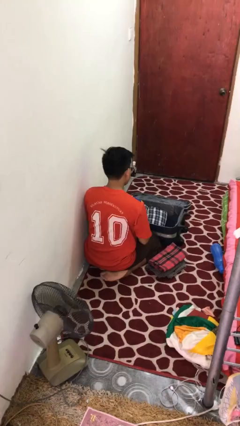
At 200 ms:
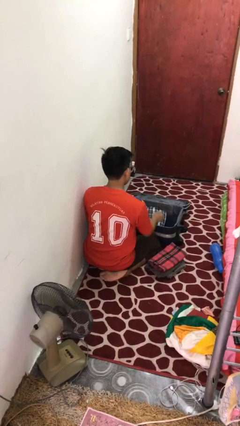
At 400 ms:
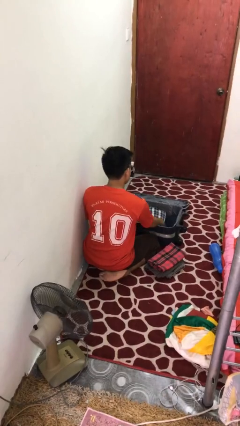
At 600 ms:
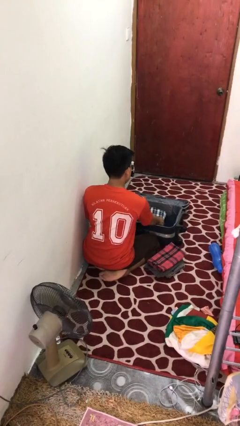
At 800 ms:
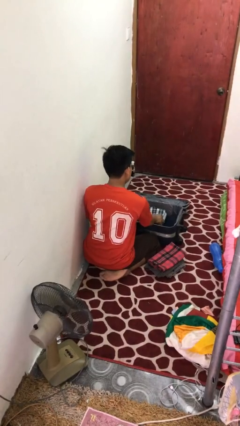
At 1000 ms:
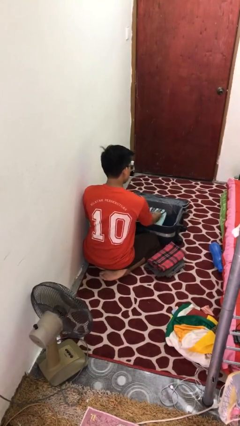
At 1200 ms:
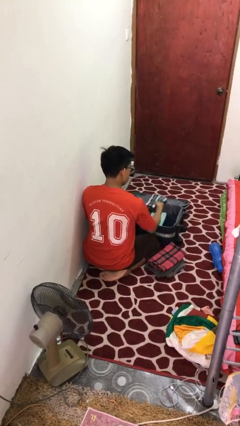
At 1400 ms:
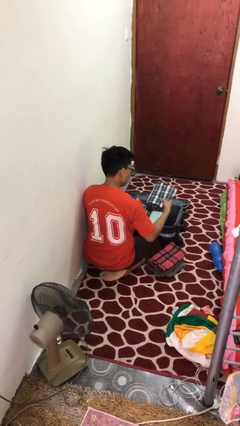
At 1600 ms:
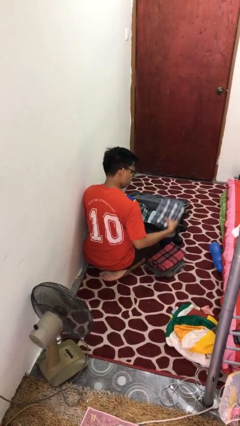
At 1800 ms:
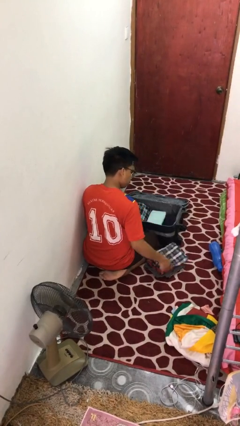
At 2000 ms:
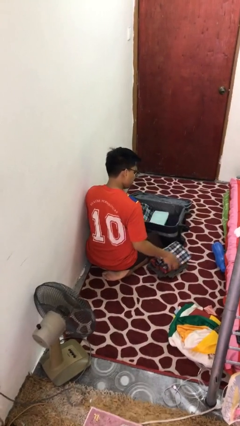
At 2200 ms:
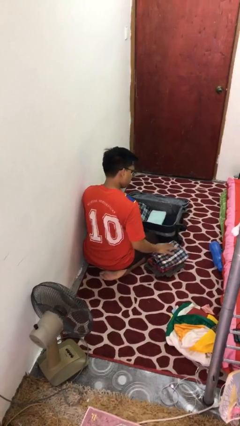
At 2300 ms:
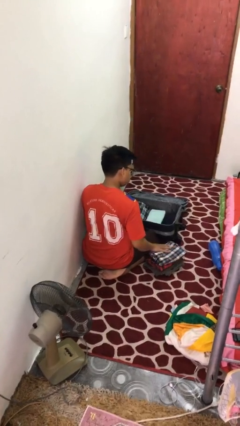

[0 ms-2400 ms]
person unloads clothes from suitcase

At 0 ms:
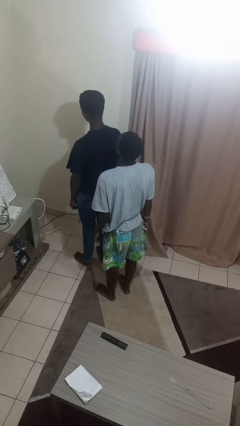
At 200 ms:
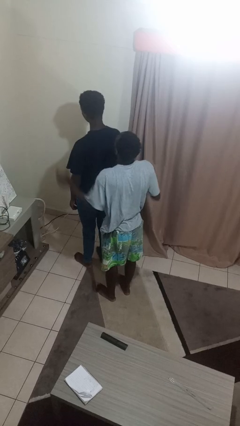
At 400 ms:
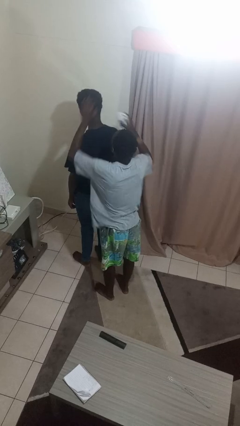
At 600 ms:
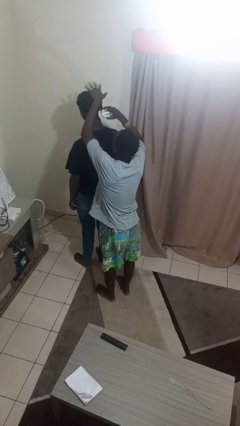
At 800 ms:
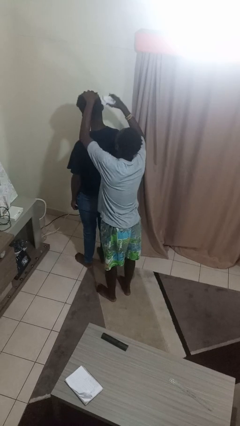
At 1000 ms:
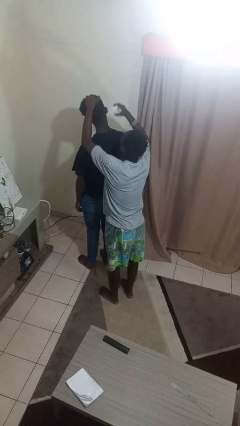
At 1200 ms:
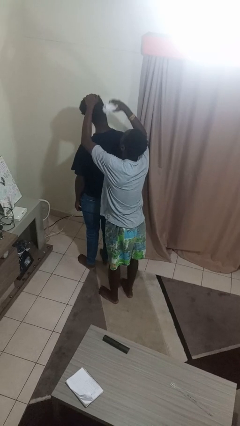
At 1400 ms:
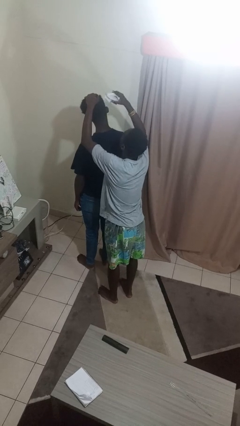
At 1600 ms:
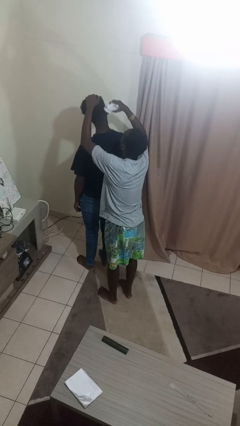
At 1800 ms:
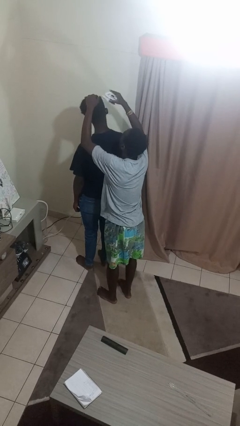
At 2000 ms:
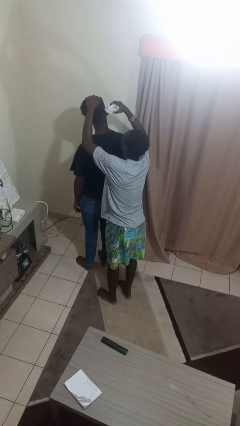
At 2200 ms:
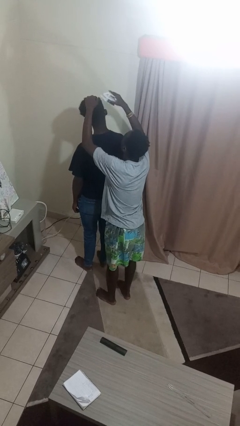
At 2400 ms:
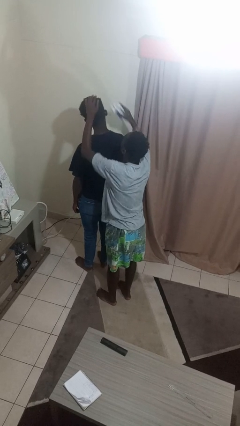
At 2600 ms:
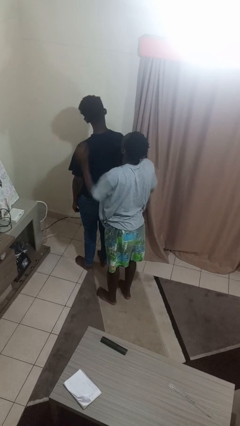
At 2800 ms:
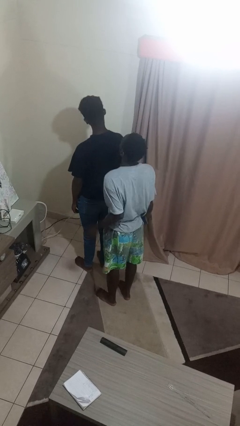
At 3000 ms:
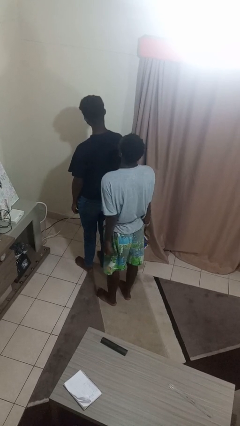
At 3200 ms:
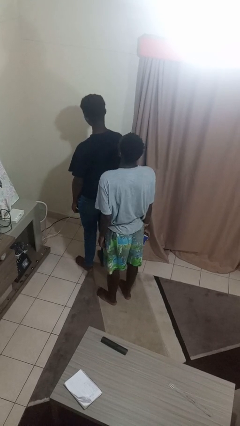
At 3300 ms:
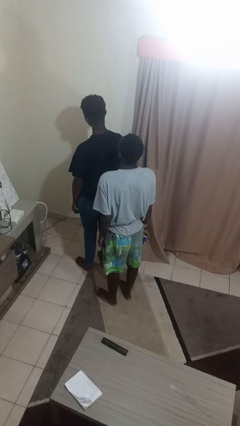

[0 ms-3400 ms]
person brushes hair of person

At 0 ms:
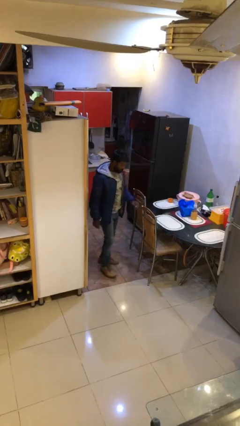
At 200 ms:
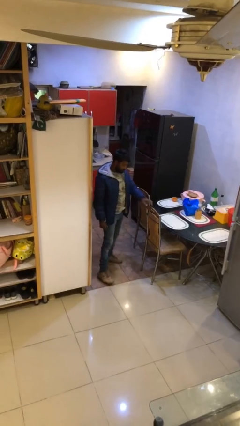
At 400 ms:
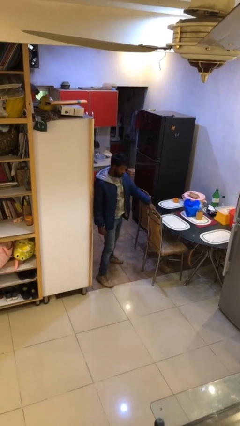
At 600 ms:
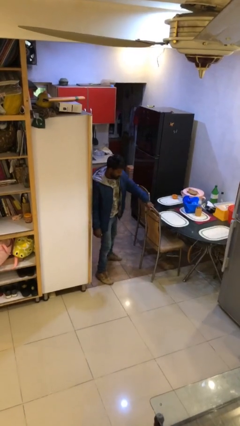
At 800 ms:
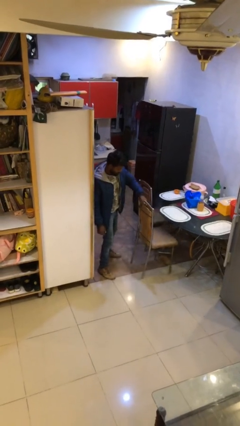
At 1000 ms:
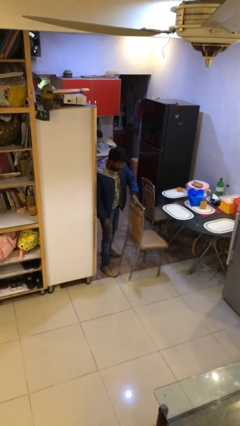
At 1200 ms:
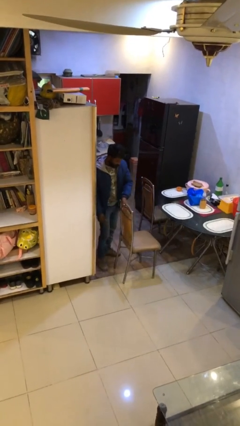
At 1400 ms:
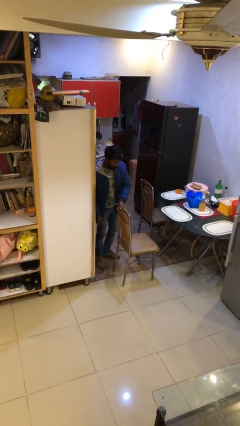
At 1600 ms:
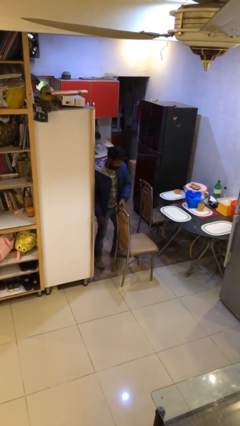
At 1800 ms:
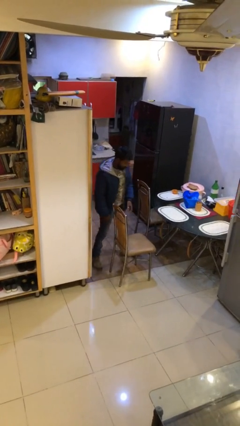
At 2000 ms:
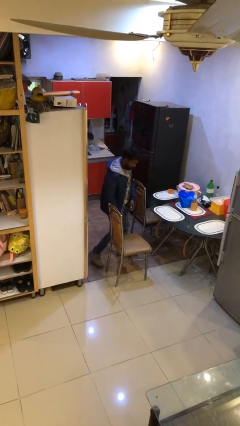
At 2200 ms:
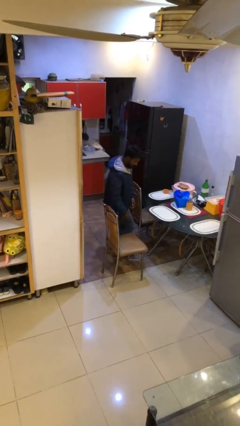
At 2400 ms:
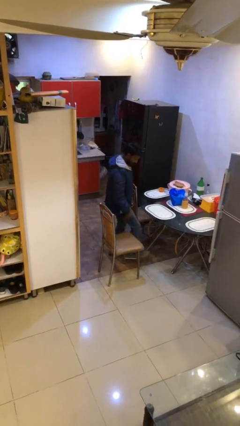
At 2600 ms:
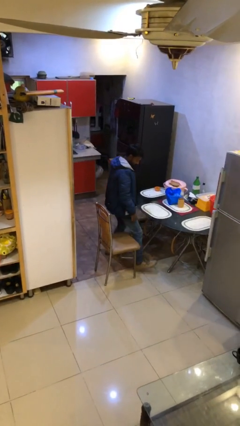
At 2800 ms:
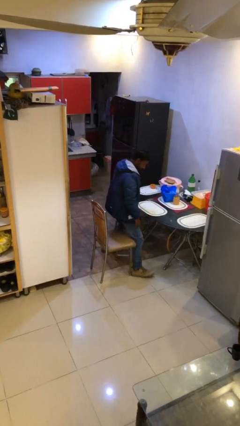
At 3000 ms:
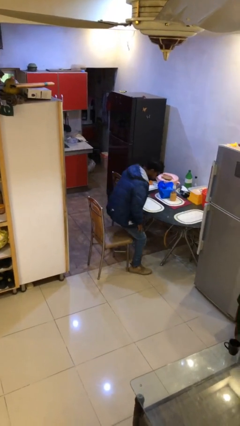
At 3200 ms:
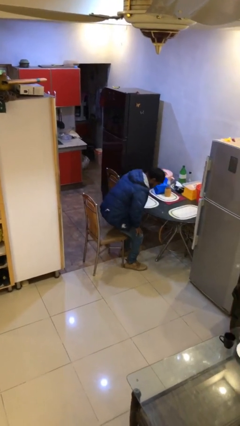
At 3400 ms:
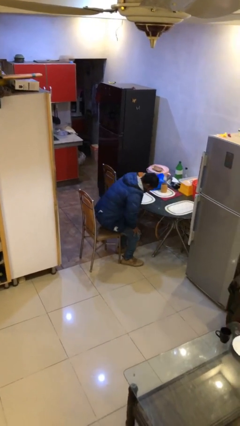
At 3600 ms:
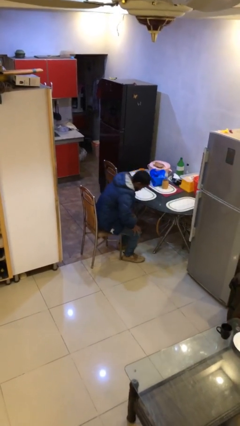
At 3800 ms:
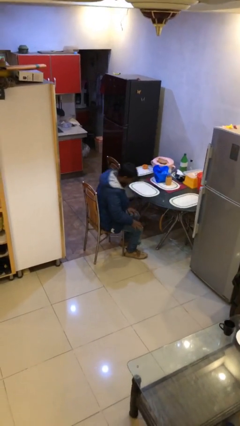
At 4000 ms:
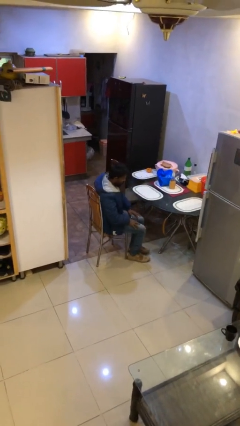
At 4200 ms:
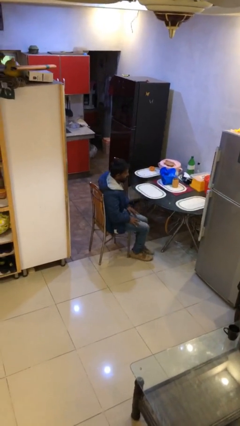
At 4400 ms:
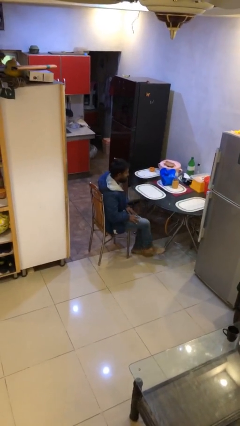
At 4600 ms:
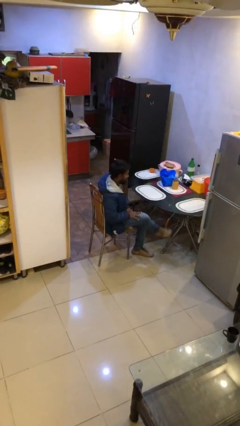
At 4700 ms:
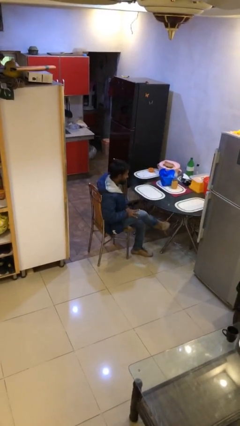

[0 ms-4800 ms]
person sits down

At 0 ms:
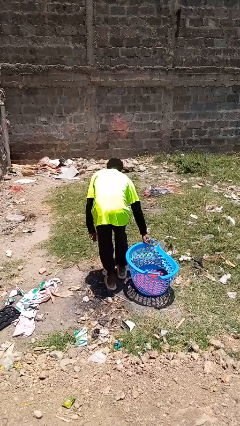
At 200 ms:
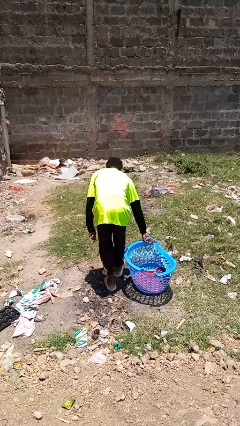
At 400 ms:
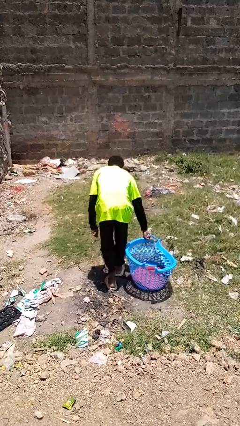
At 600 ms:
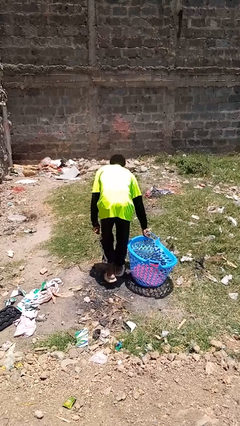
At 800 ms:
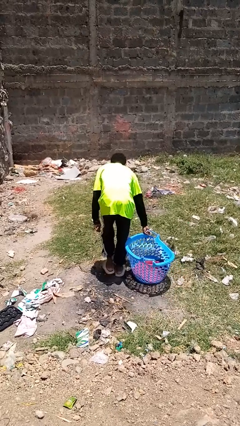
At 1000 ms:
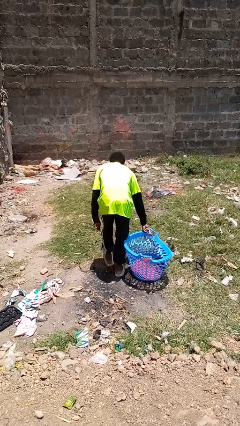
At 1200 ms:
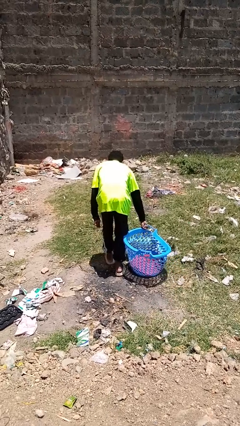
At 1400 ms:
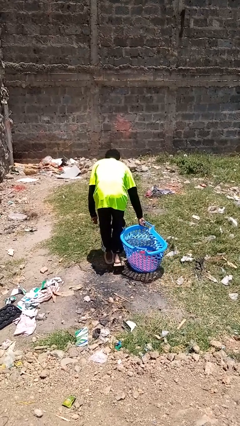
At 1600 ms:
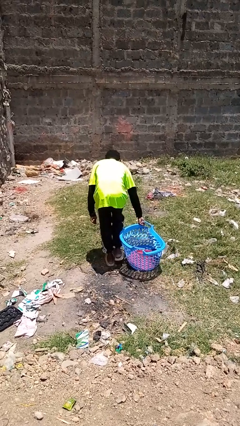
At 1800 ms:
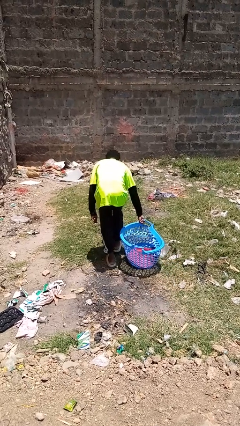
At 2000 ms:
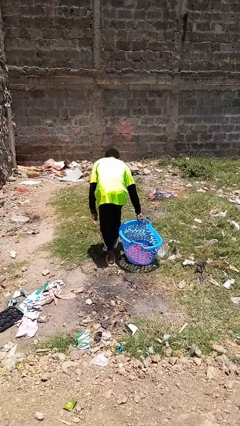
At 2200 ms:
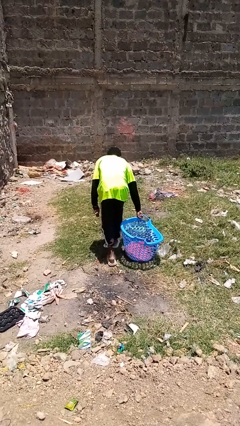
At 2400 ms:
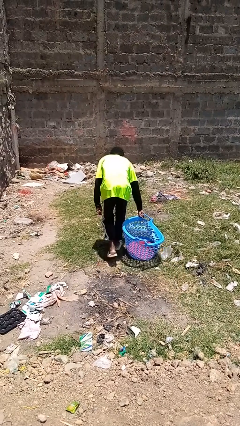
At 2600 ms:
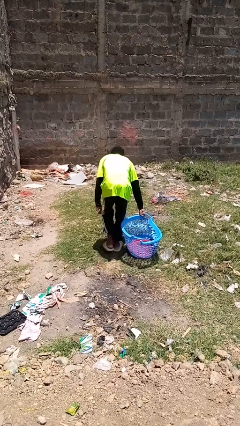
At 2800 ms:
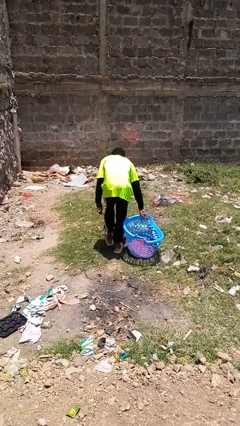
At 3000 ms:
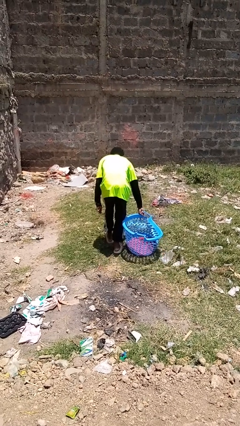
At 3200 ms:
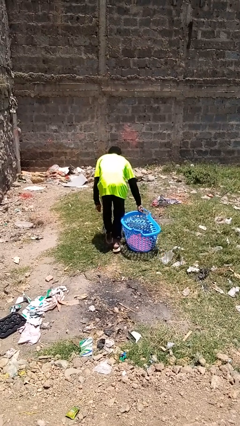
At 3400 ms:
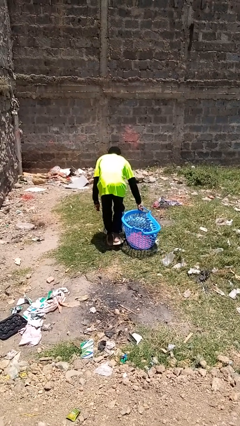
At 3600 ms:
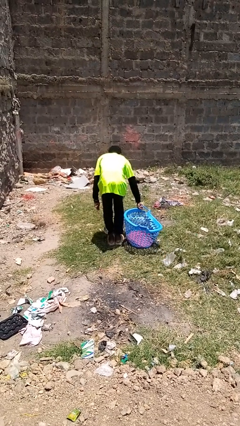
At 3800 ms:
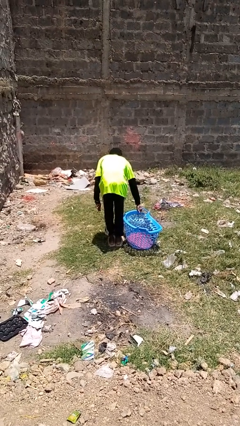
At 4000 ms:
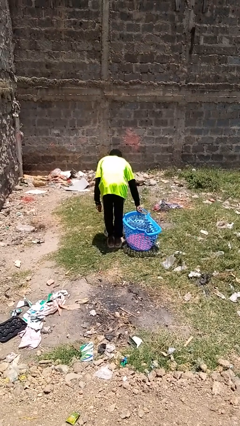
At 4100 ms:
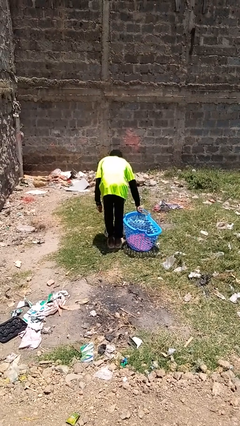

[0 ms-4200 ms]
person pushes wheeled trashcan

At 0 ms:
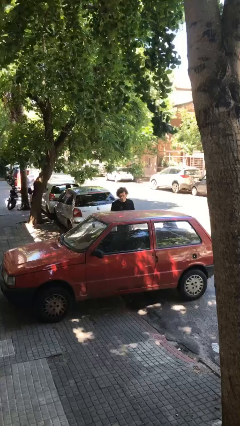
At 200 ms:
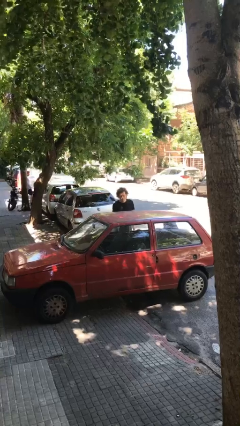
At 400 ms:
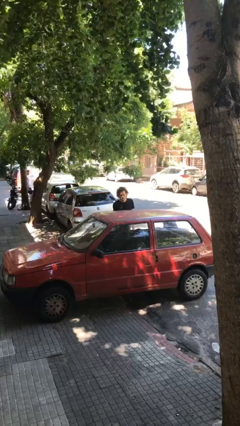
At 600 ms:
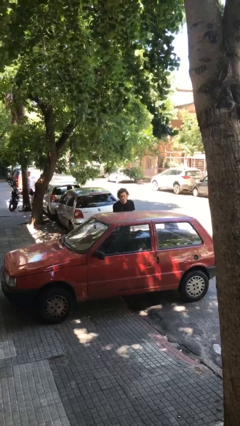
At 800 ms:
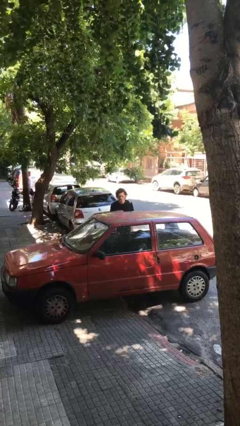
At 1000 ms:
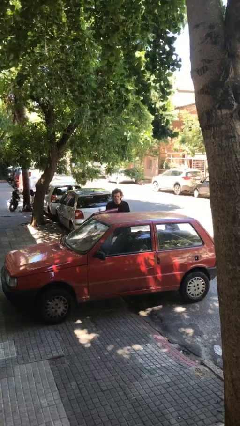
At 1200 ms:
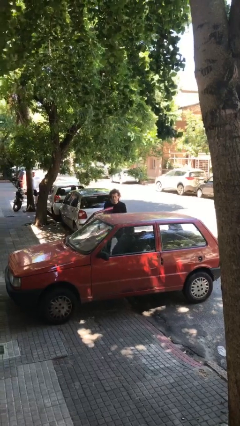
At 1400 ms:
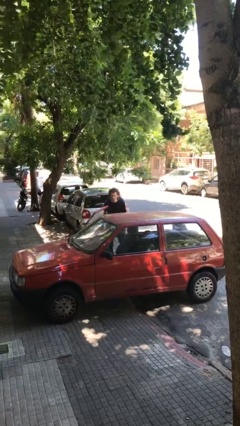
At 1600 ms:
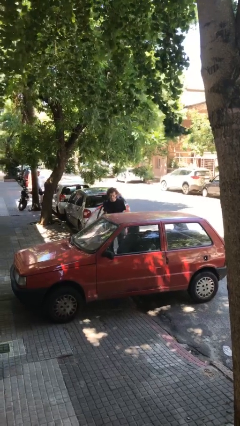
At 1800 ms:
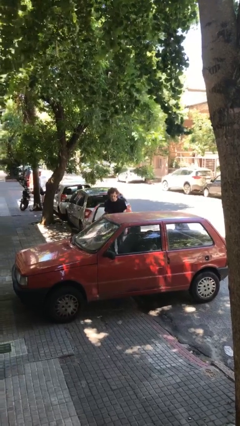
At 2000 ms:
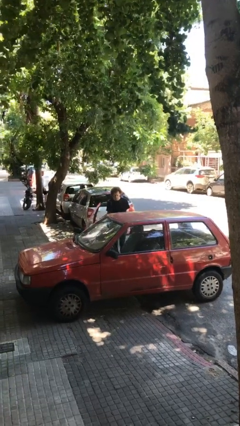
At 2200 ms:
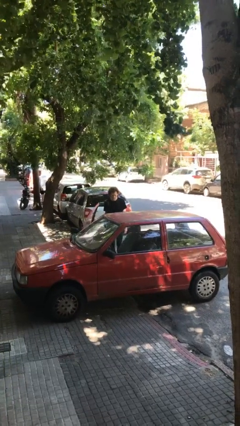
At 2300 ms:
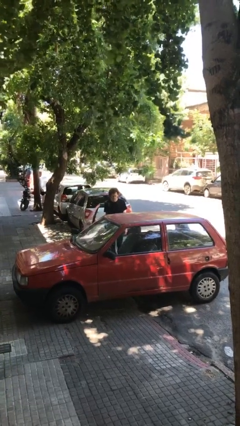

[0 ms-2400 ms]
person opens car door

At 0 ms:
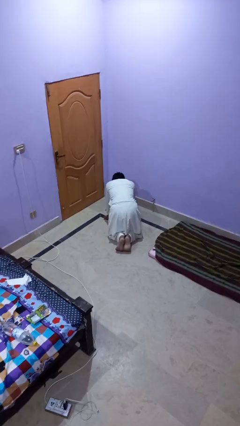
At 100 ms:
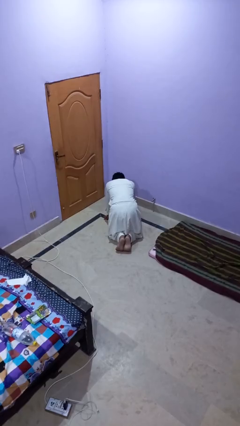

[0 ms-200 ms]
person crawls
